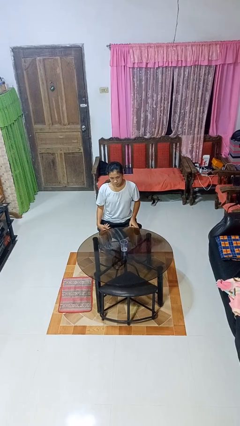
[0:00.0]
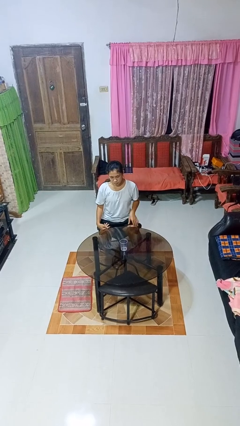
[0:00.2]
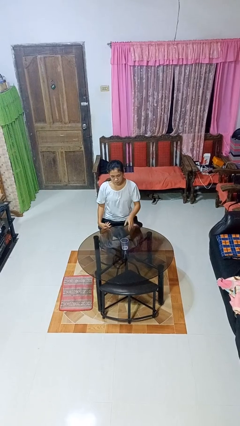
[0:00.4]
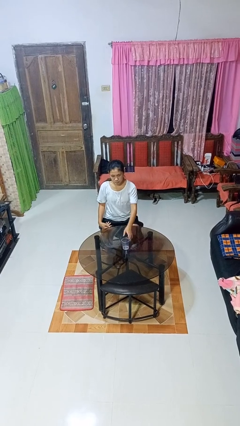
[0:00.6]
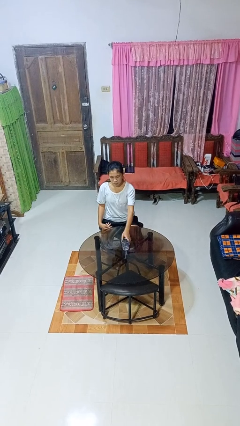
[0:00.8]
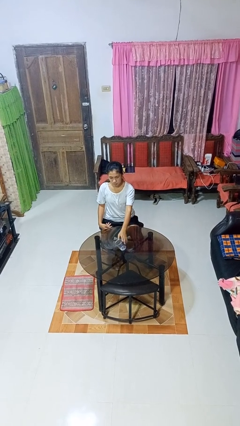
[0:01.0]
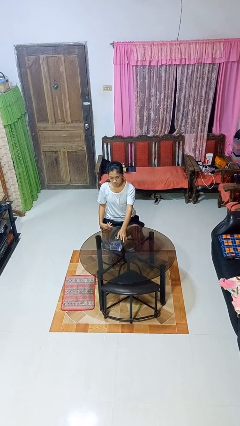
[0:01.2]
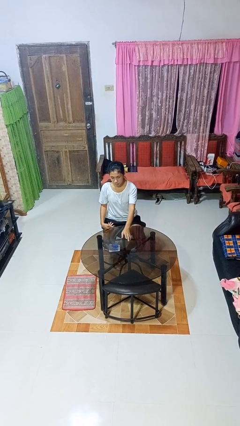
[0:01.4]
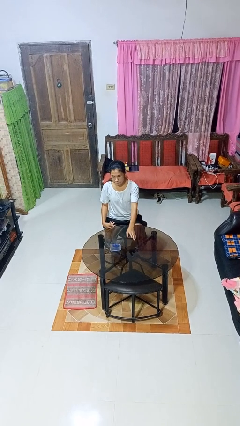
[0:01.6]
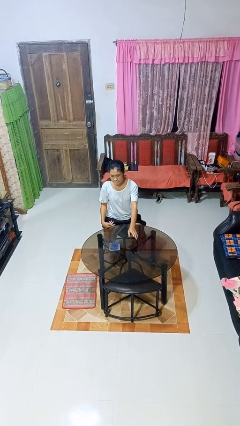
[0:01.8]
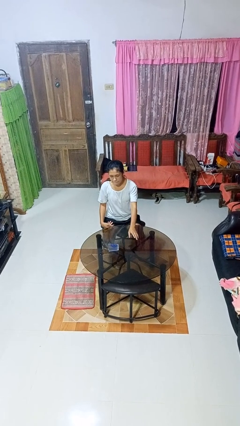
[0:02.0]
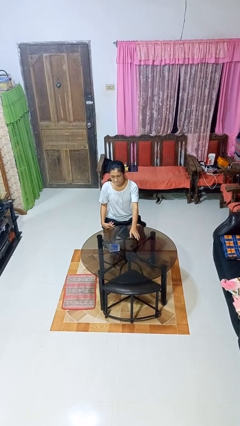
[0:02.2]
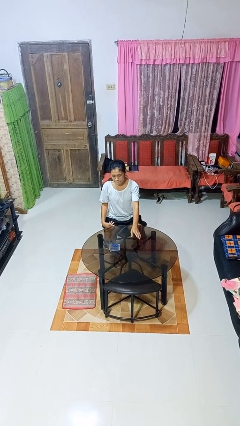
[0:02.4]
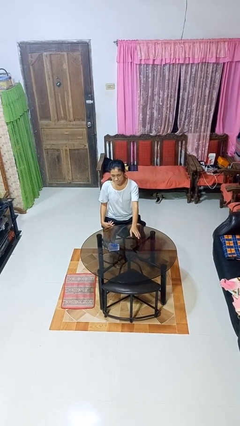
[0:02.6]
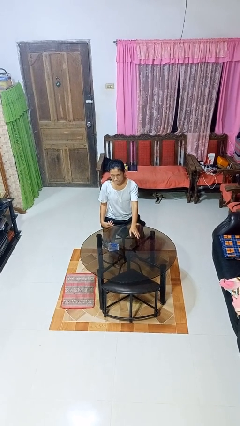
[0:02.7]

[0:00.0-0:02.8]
person spills on table

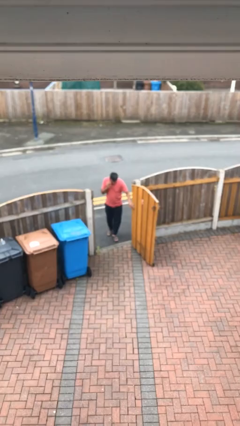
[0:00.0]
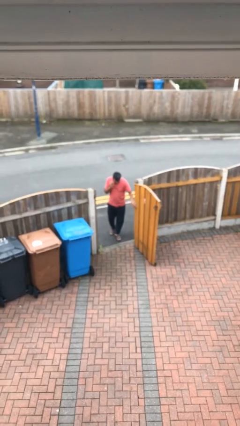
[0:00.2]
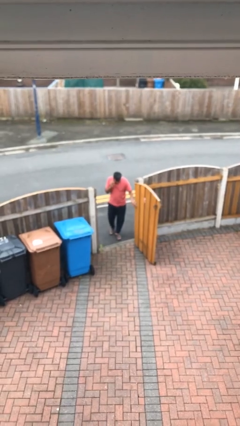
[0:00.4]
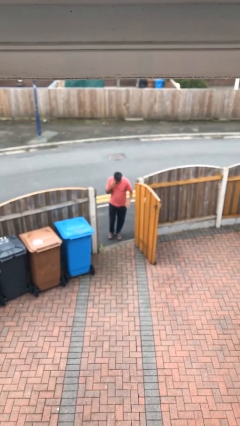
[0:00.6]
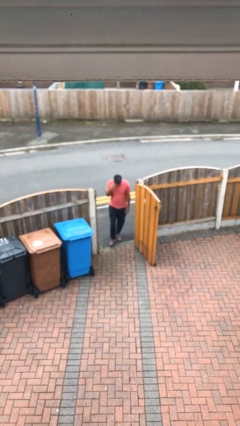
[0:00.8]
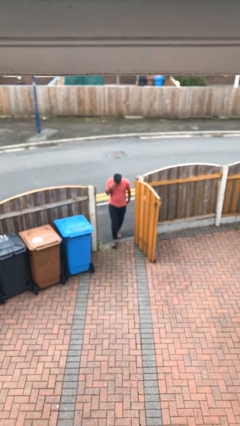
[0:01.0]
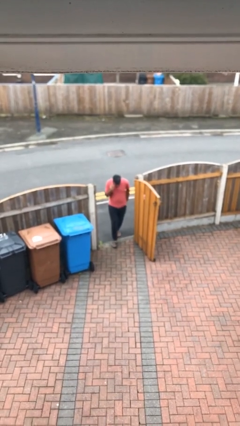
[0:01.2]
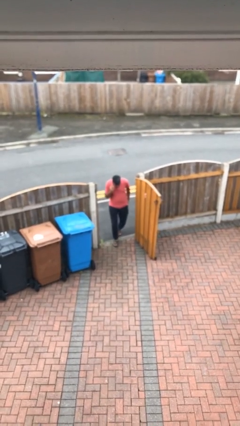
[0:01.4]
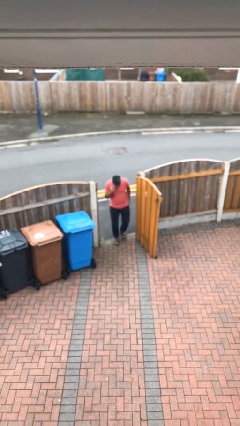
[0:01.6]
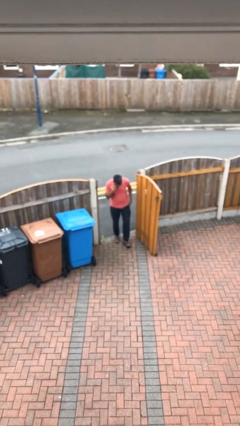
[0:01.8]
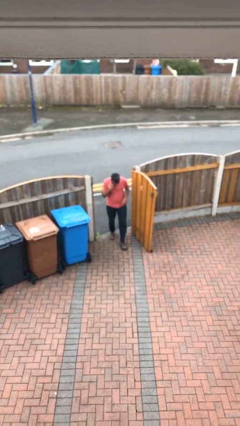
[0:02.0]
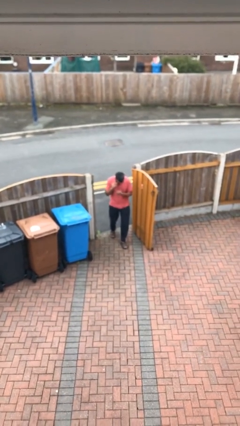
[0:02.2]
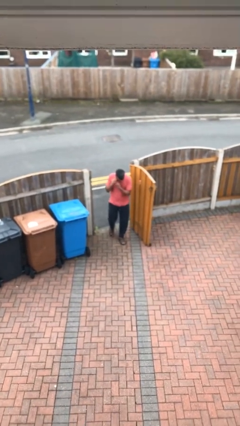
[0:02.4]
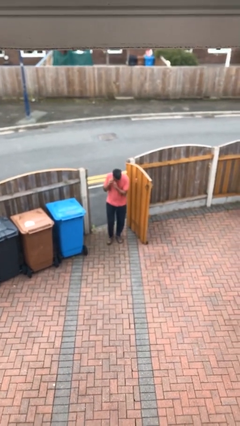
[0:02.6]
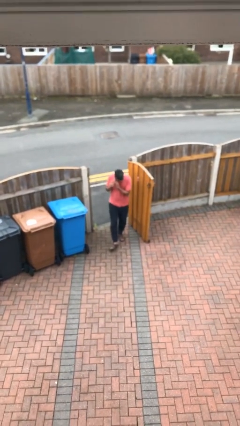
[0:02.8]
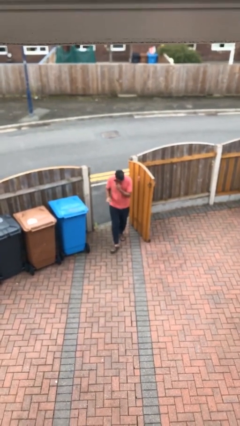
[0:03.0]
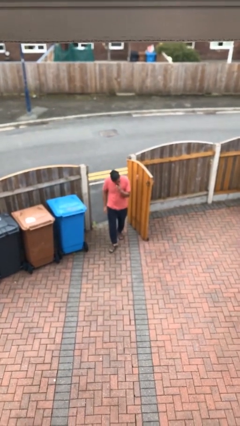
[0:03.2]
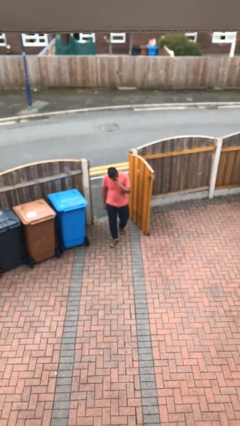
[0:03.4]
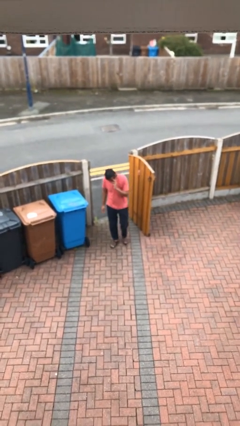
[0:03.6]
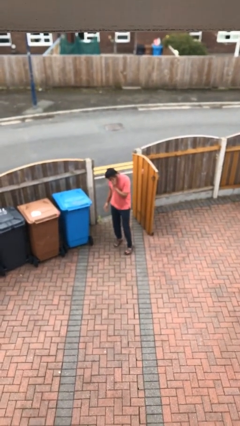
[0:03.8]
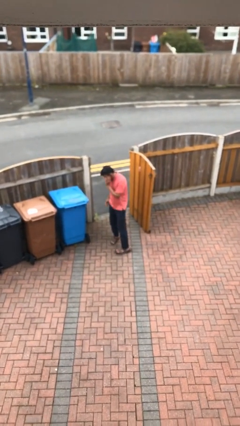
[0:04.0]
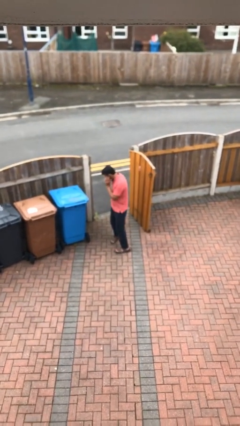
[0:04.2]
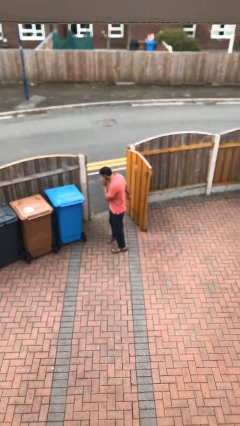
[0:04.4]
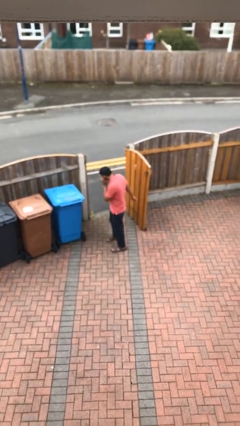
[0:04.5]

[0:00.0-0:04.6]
person enters scene through structure

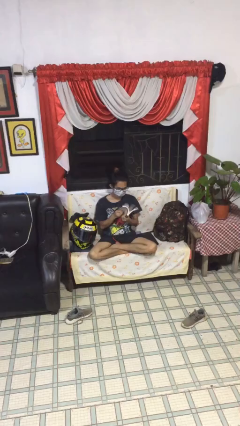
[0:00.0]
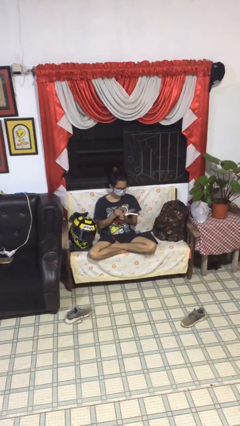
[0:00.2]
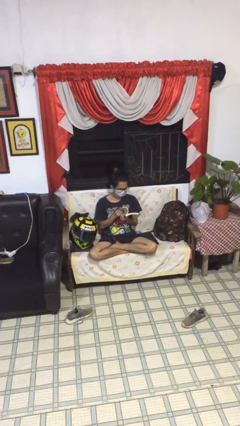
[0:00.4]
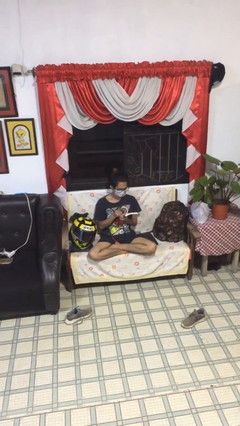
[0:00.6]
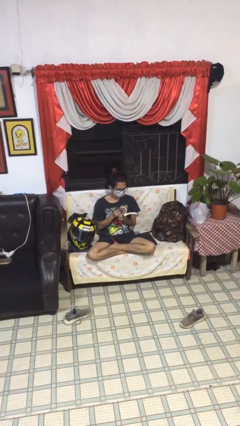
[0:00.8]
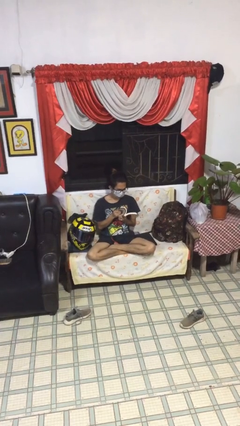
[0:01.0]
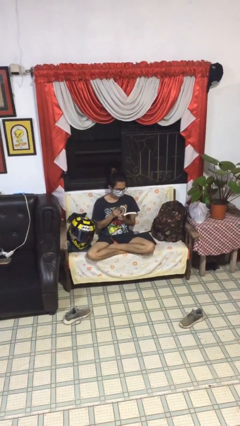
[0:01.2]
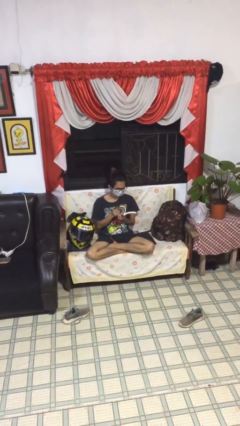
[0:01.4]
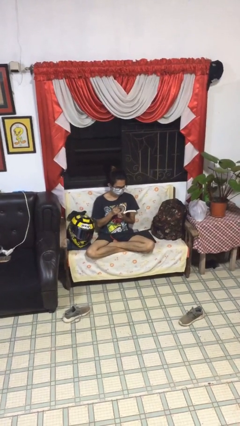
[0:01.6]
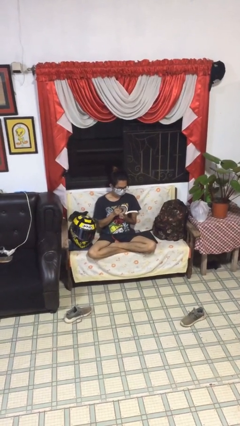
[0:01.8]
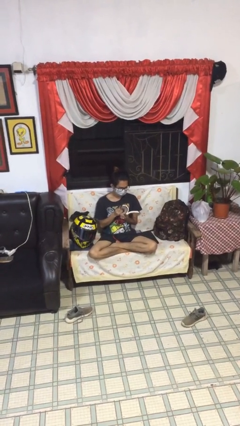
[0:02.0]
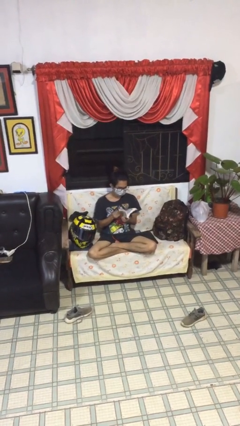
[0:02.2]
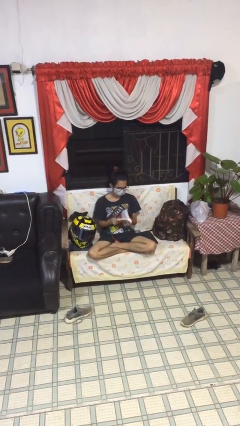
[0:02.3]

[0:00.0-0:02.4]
person reads document

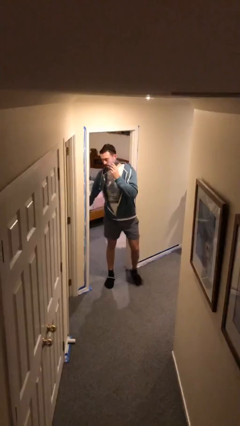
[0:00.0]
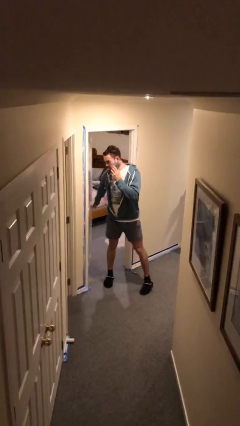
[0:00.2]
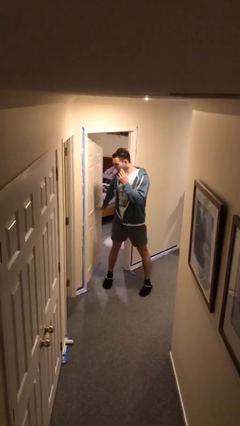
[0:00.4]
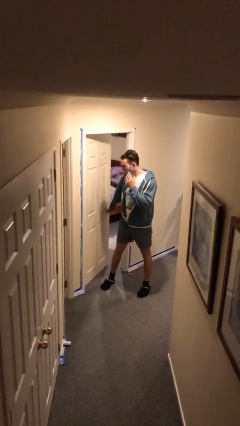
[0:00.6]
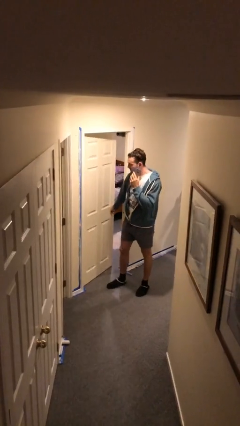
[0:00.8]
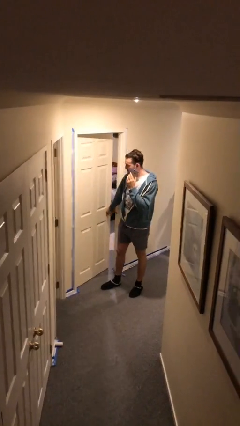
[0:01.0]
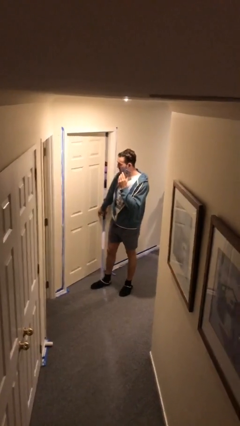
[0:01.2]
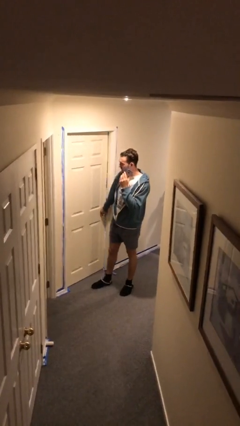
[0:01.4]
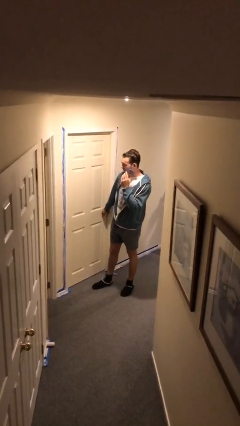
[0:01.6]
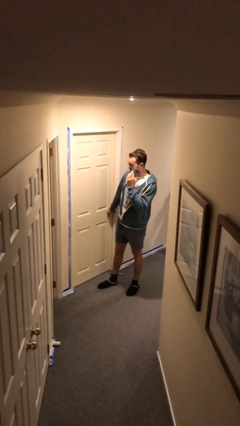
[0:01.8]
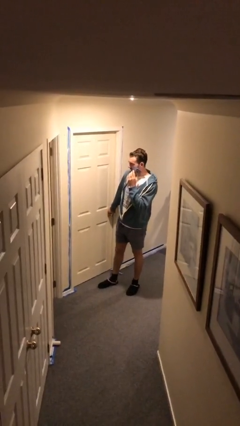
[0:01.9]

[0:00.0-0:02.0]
person closes facility door

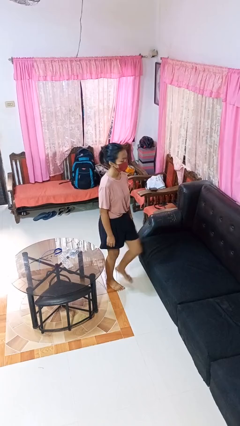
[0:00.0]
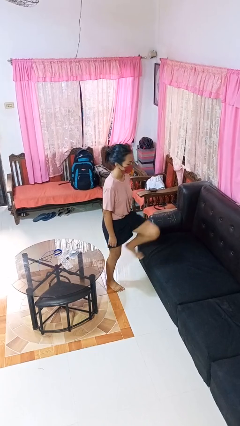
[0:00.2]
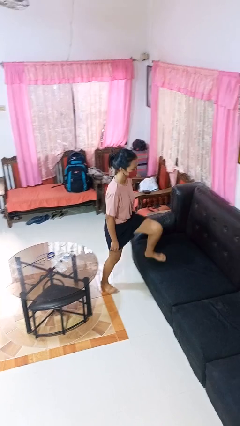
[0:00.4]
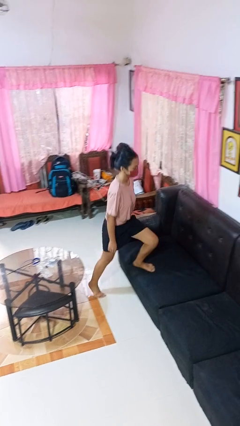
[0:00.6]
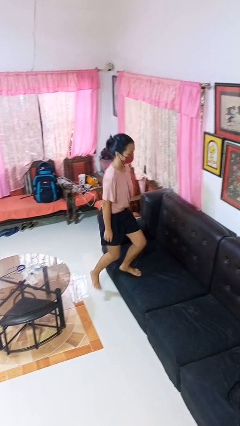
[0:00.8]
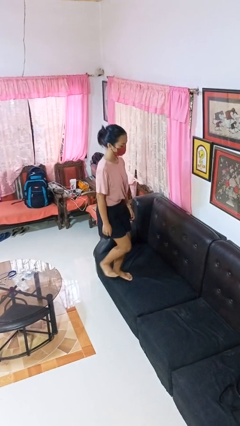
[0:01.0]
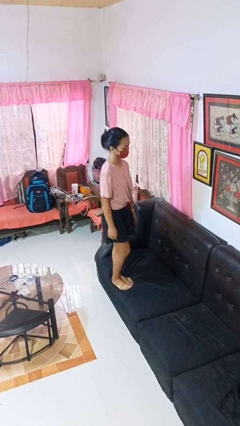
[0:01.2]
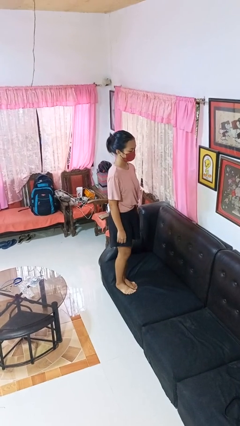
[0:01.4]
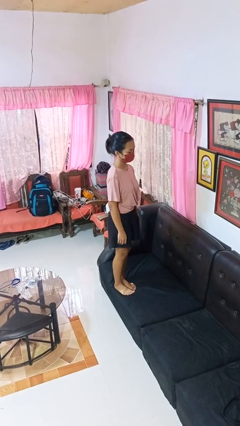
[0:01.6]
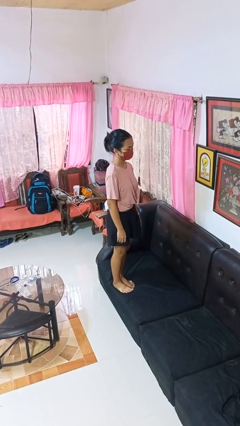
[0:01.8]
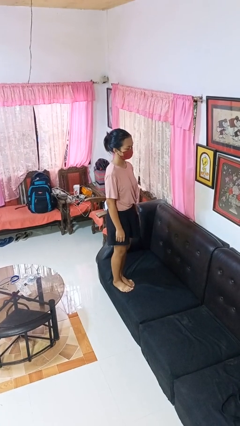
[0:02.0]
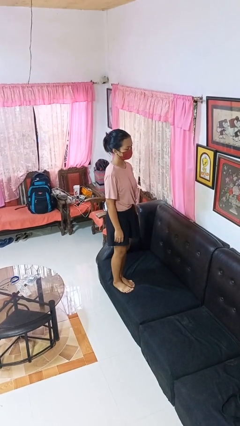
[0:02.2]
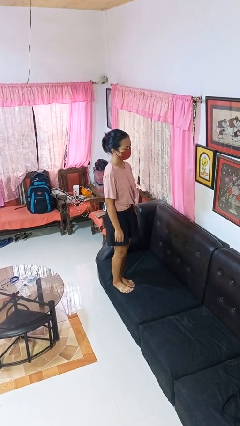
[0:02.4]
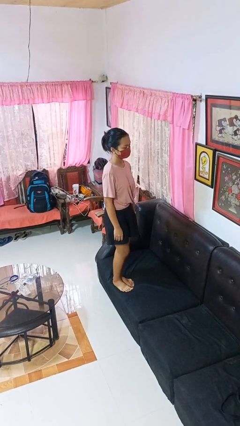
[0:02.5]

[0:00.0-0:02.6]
person climbs on couch

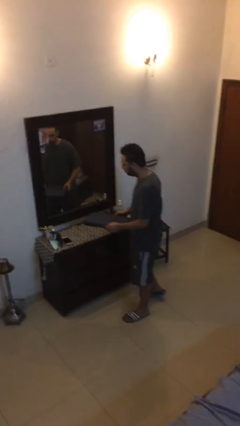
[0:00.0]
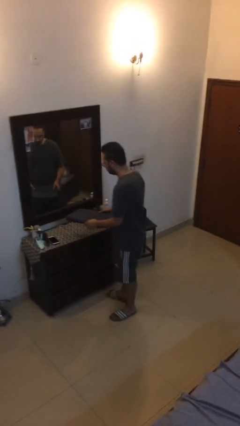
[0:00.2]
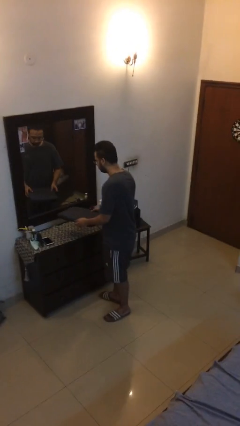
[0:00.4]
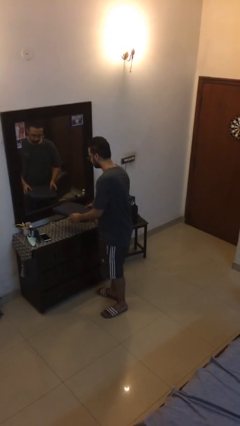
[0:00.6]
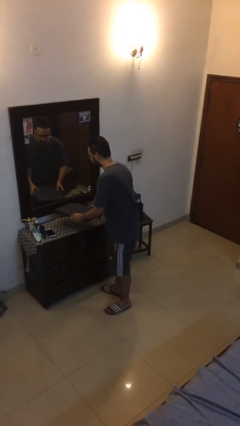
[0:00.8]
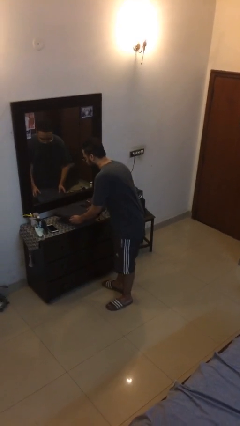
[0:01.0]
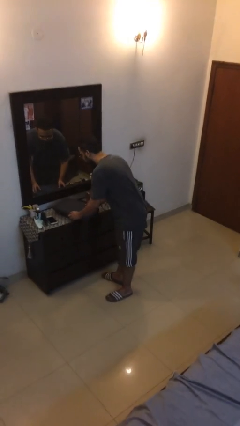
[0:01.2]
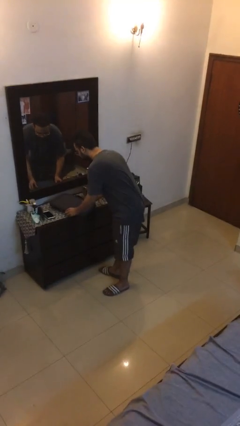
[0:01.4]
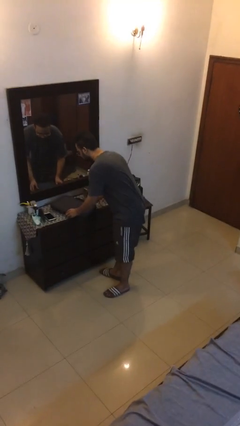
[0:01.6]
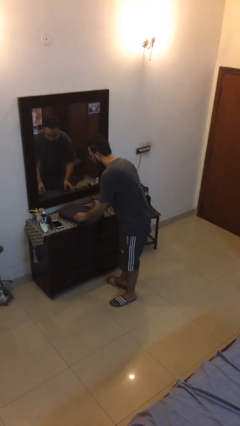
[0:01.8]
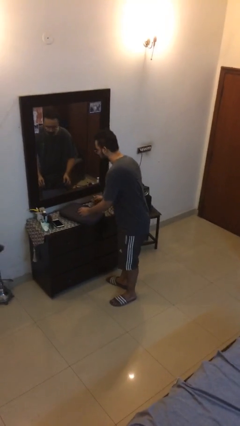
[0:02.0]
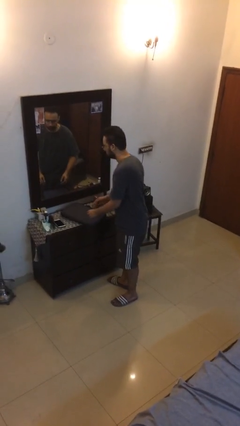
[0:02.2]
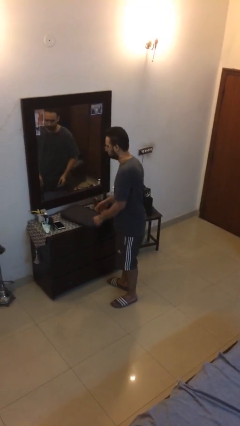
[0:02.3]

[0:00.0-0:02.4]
person puts down object on table

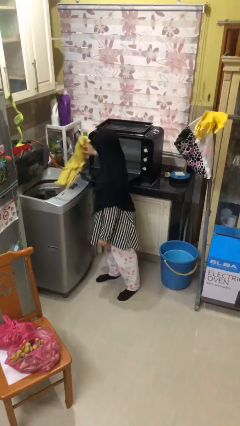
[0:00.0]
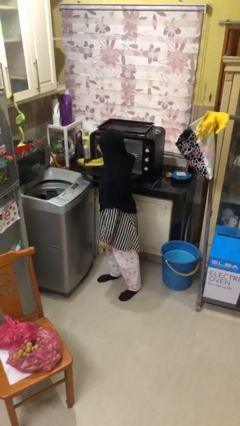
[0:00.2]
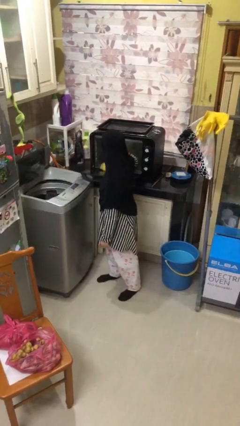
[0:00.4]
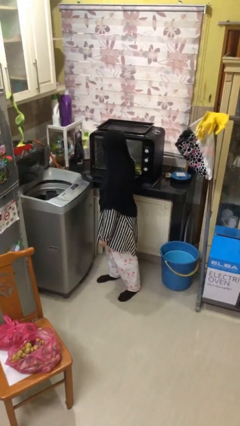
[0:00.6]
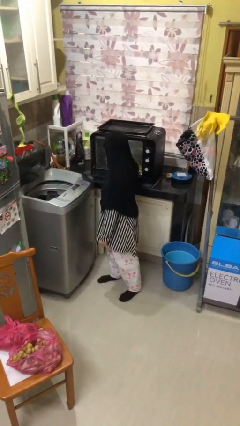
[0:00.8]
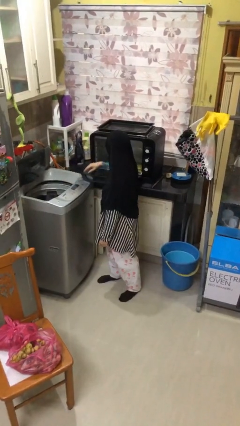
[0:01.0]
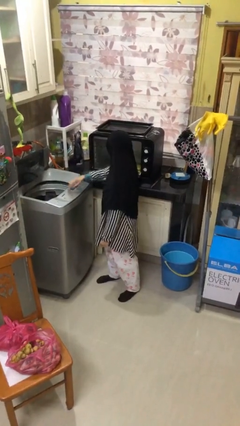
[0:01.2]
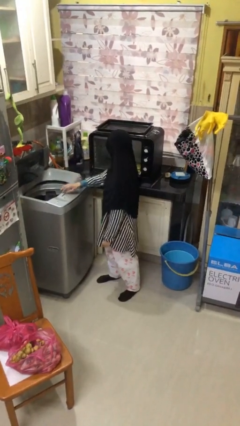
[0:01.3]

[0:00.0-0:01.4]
person loads dryer
